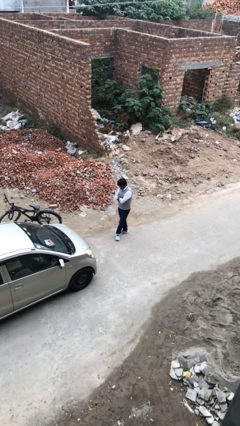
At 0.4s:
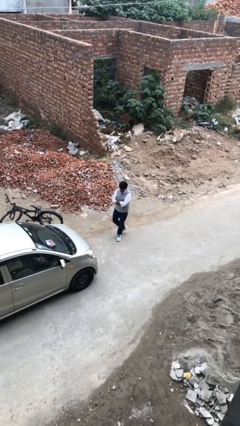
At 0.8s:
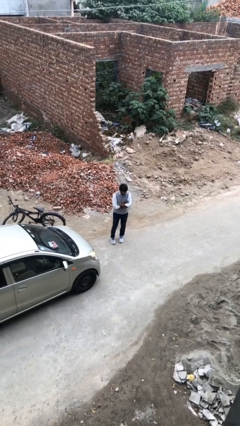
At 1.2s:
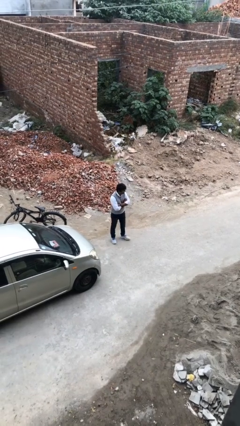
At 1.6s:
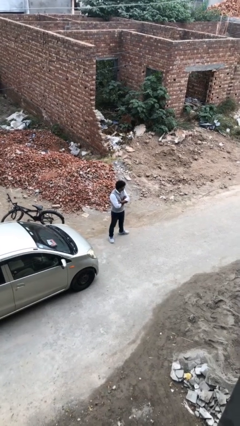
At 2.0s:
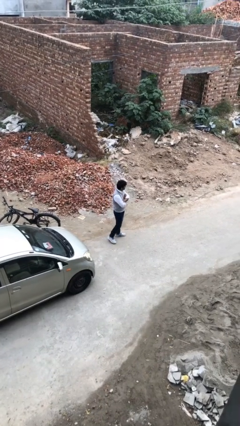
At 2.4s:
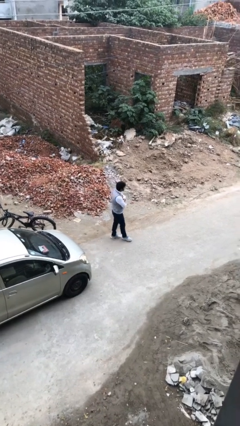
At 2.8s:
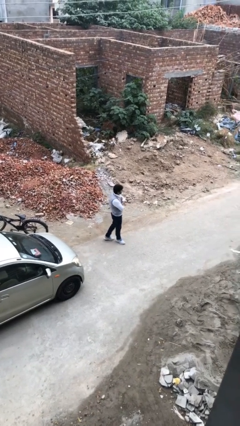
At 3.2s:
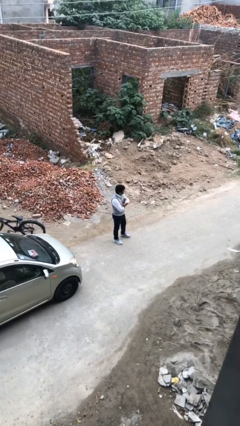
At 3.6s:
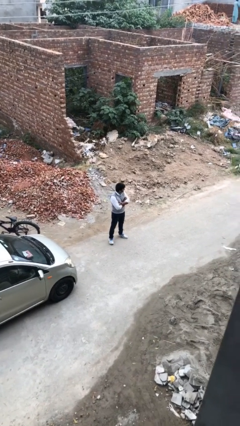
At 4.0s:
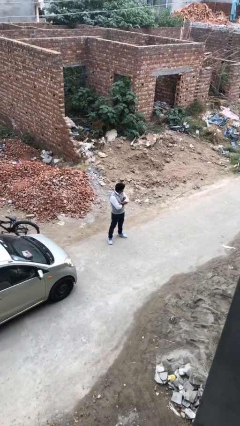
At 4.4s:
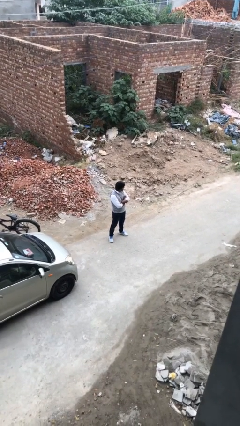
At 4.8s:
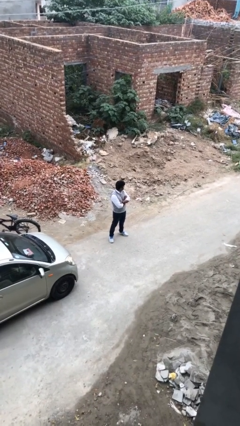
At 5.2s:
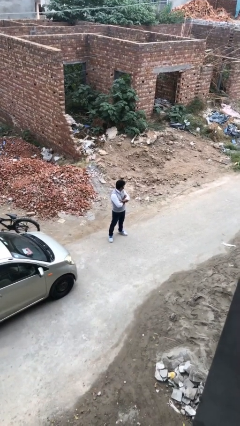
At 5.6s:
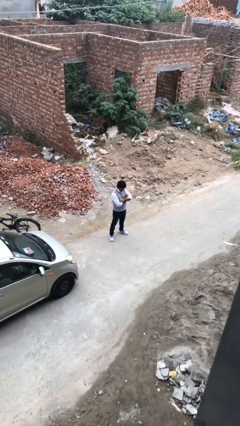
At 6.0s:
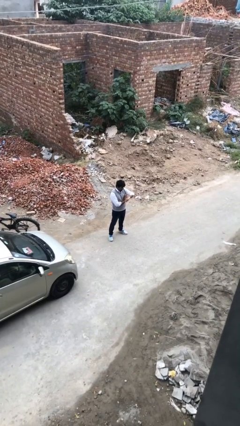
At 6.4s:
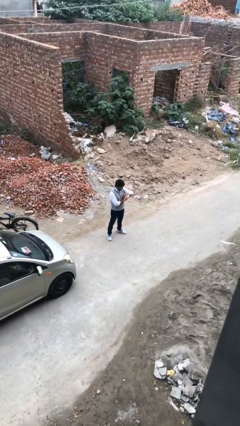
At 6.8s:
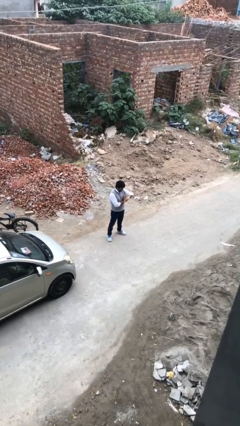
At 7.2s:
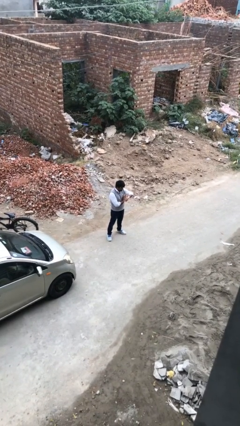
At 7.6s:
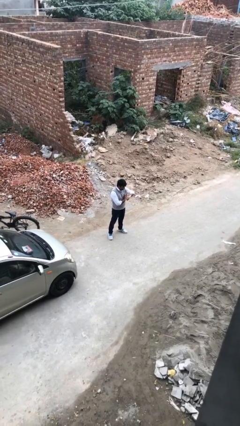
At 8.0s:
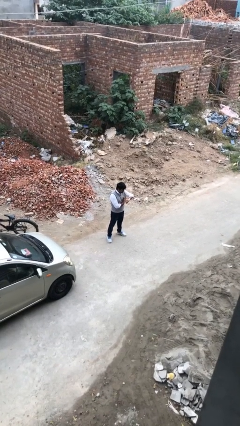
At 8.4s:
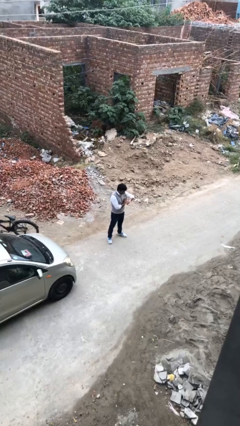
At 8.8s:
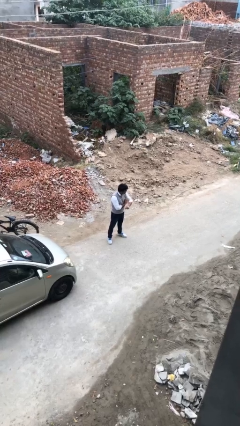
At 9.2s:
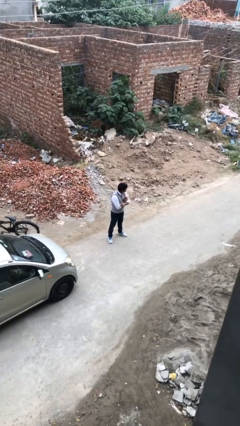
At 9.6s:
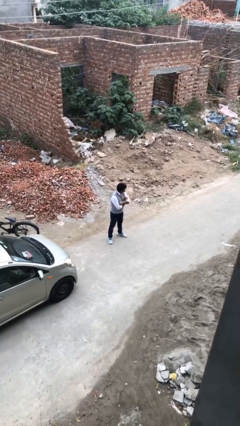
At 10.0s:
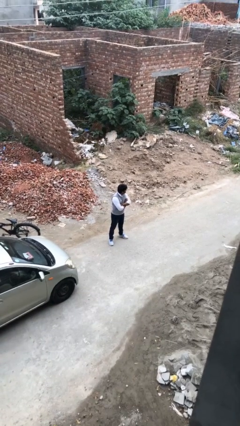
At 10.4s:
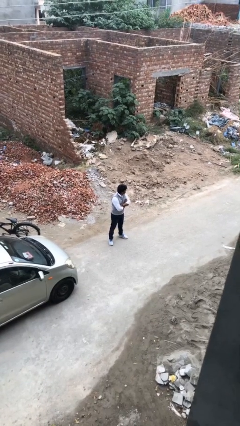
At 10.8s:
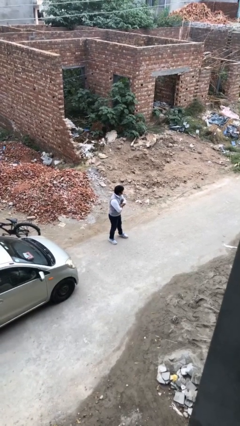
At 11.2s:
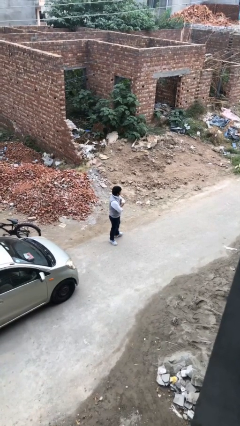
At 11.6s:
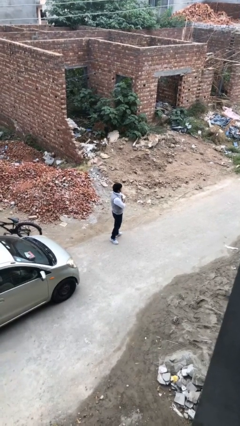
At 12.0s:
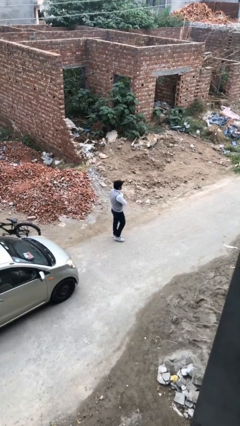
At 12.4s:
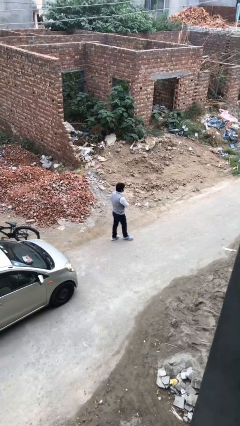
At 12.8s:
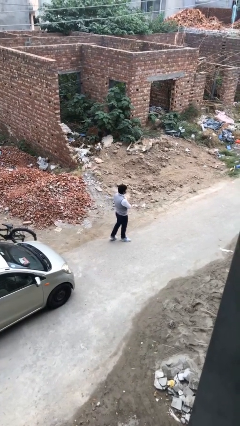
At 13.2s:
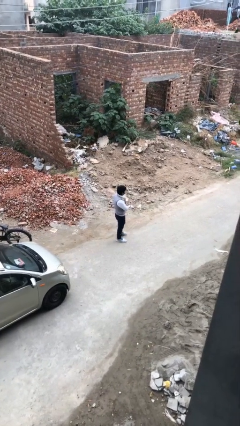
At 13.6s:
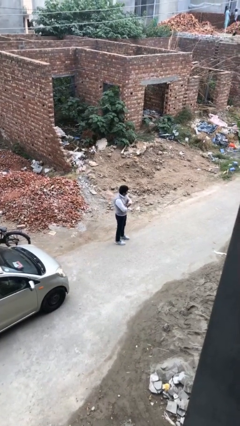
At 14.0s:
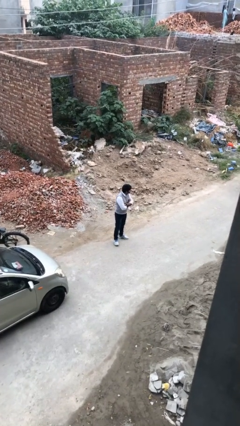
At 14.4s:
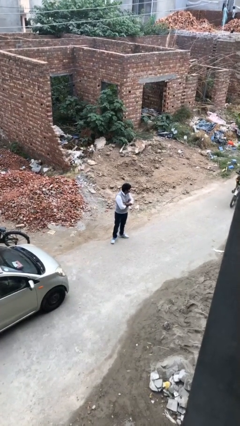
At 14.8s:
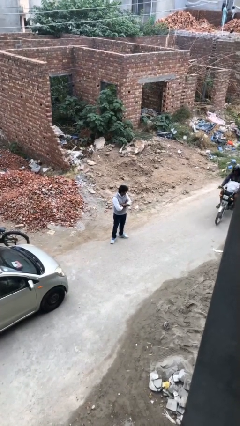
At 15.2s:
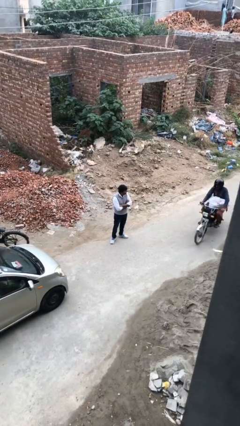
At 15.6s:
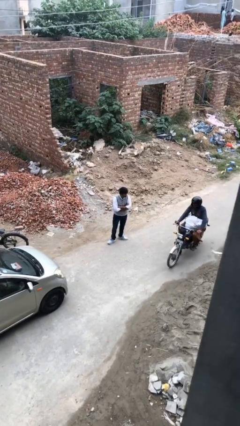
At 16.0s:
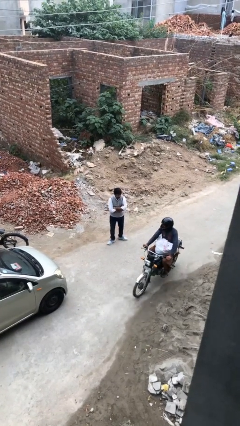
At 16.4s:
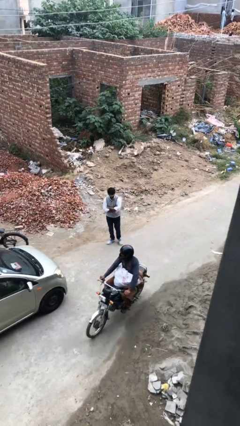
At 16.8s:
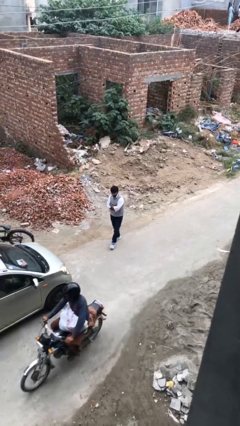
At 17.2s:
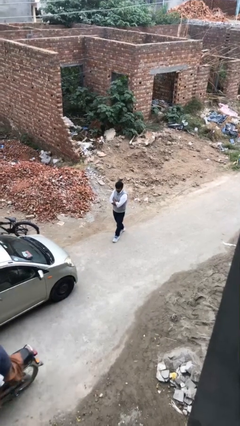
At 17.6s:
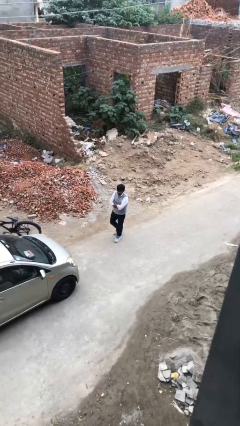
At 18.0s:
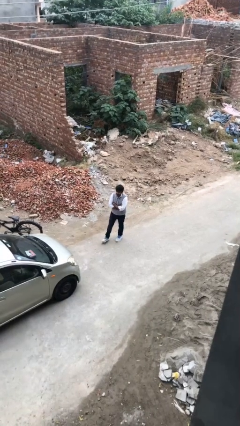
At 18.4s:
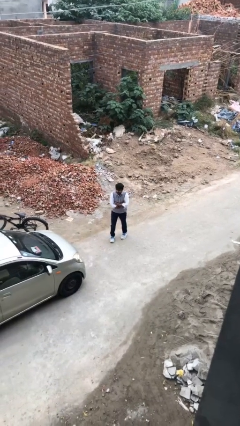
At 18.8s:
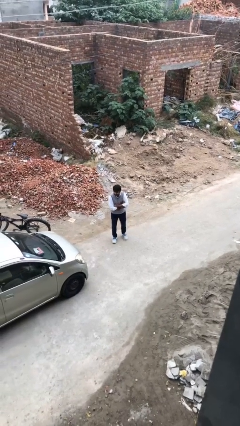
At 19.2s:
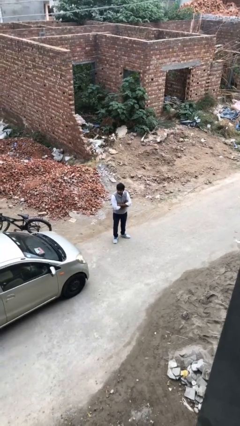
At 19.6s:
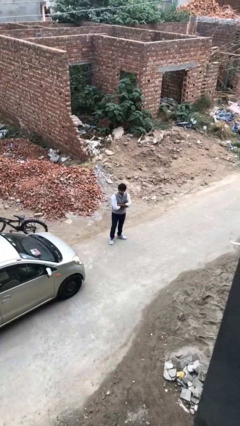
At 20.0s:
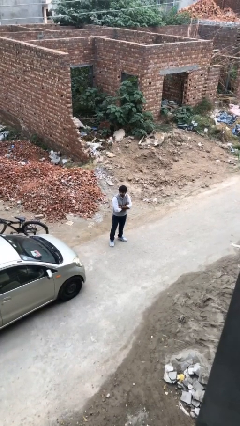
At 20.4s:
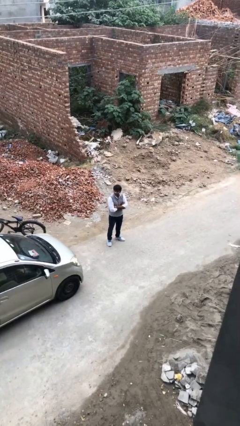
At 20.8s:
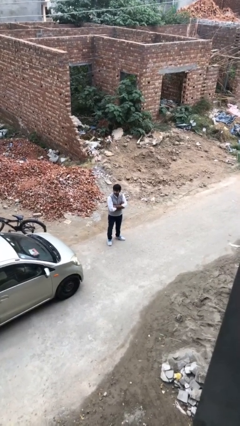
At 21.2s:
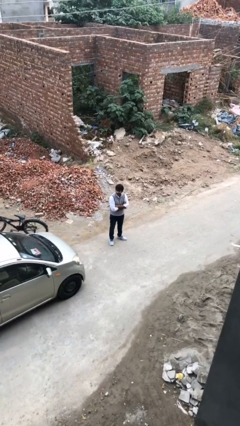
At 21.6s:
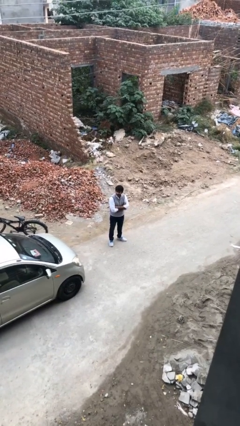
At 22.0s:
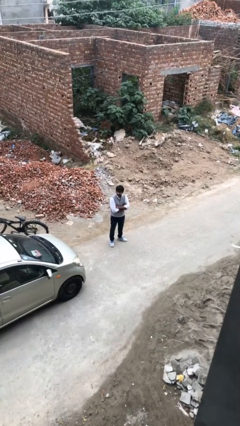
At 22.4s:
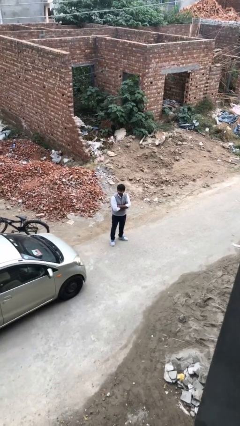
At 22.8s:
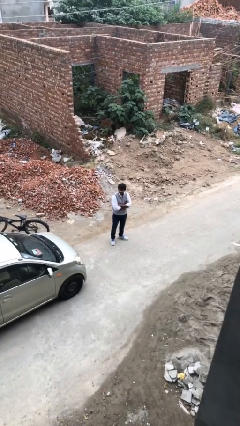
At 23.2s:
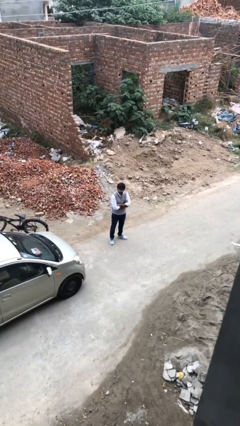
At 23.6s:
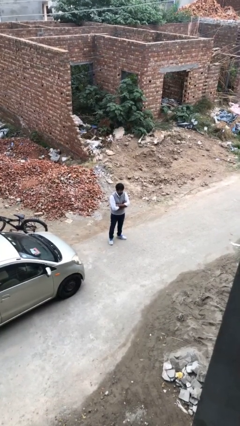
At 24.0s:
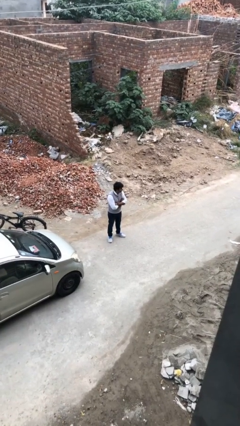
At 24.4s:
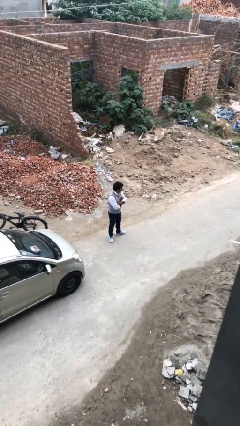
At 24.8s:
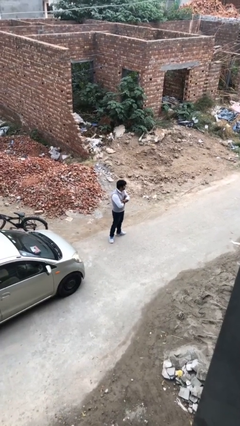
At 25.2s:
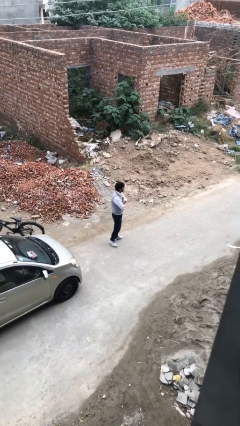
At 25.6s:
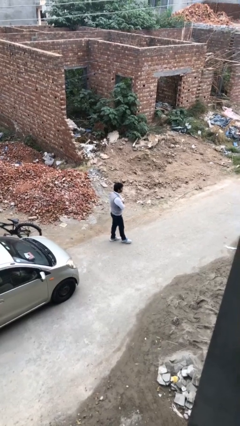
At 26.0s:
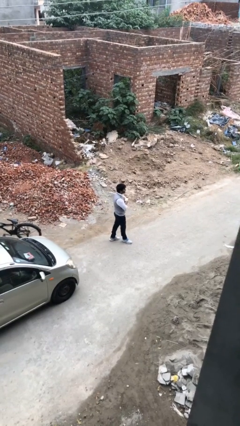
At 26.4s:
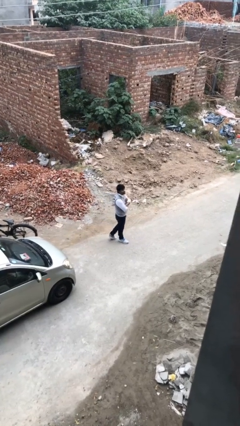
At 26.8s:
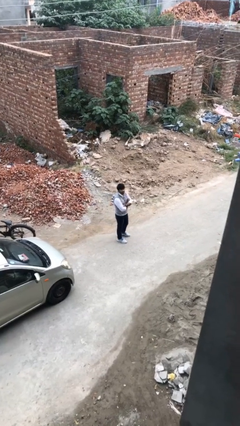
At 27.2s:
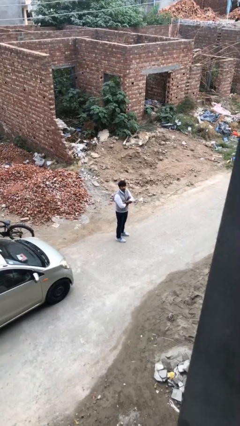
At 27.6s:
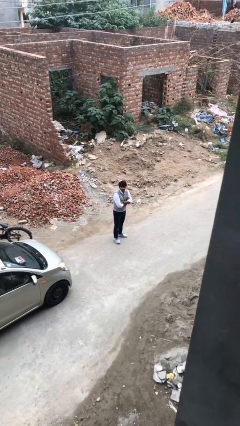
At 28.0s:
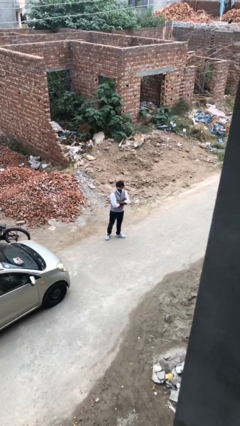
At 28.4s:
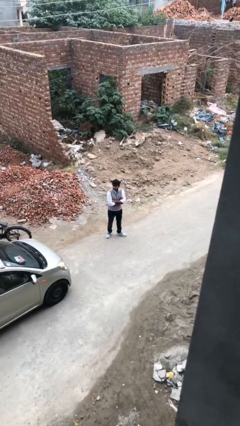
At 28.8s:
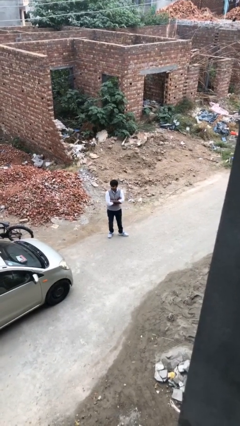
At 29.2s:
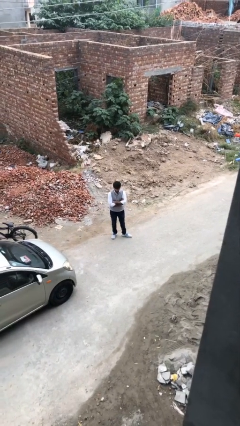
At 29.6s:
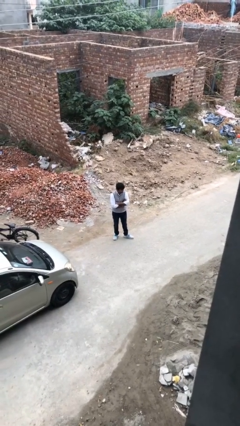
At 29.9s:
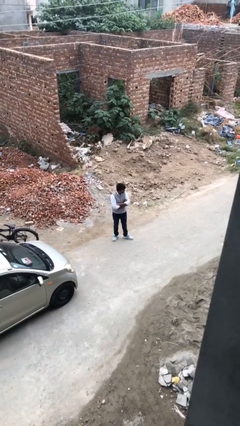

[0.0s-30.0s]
person walks

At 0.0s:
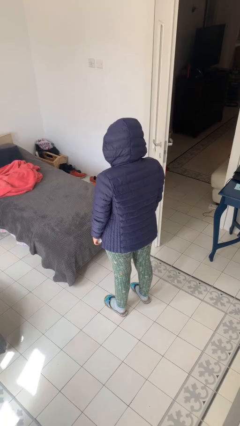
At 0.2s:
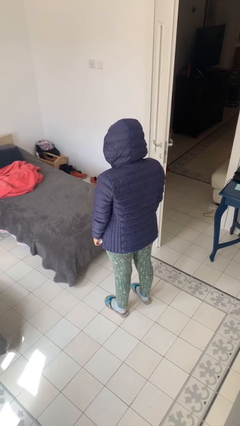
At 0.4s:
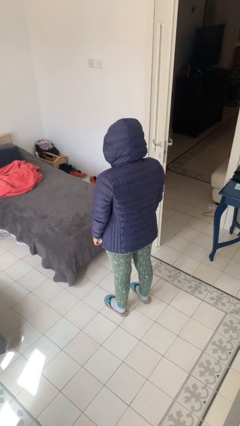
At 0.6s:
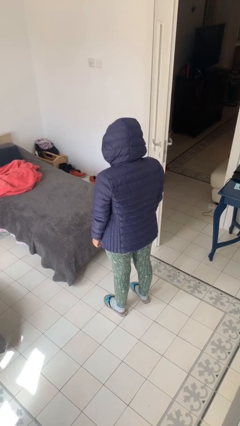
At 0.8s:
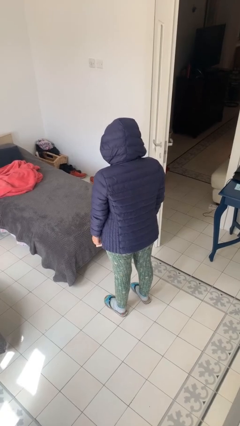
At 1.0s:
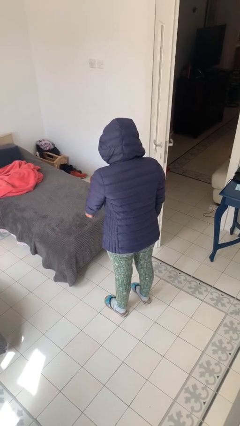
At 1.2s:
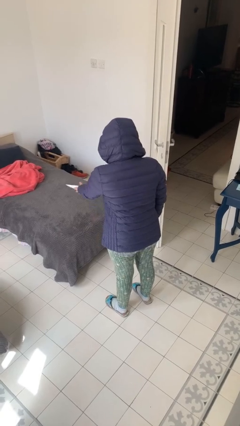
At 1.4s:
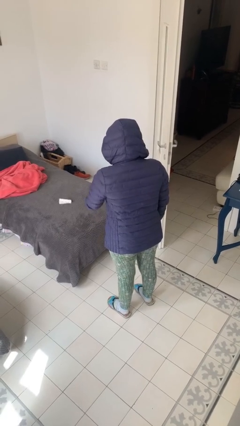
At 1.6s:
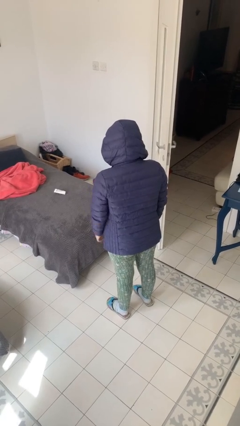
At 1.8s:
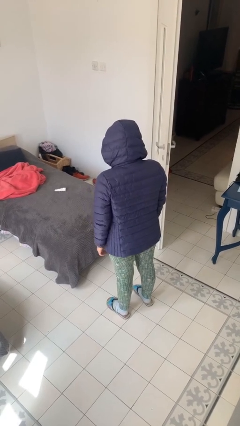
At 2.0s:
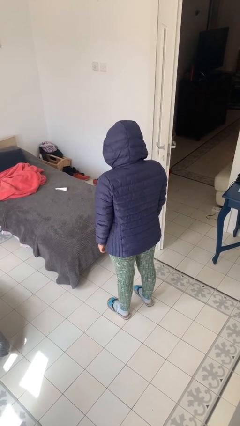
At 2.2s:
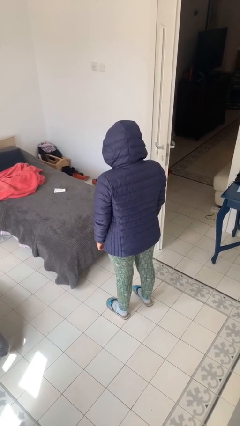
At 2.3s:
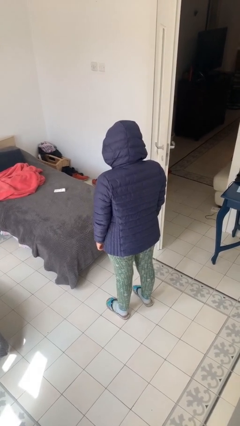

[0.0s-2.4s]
person throws object on bed
